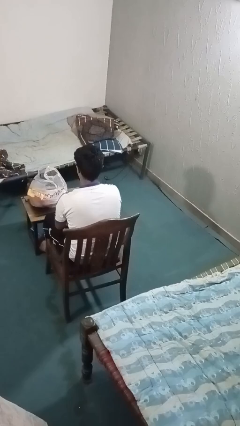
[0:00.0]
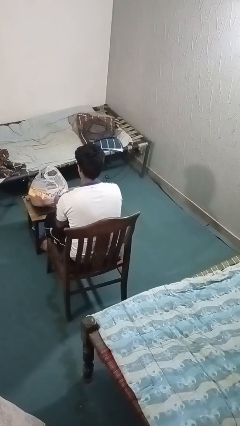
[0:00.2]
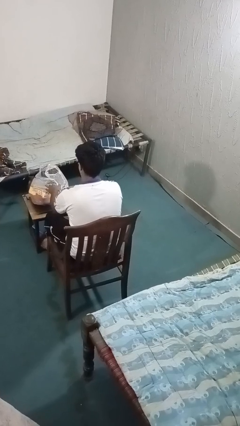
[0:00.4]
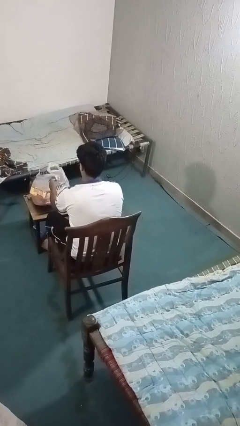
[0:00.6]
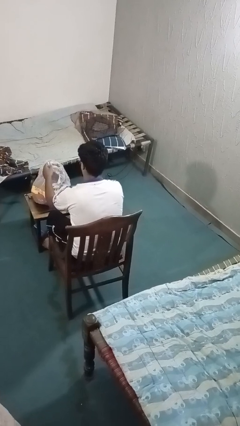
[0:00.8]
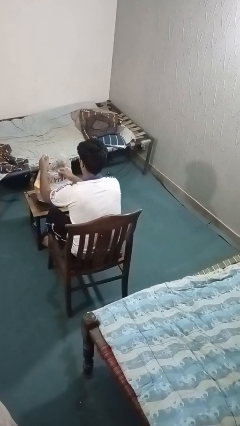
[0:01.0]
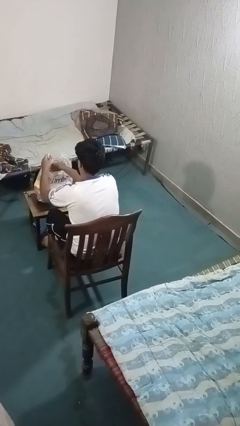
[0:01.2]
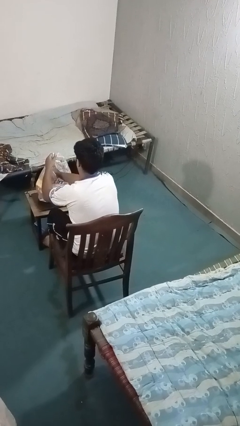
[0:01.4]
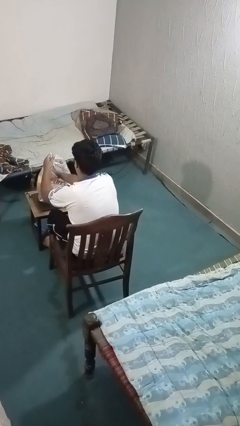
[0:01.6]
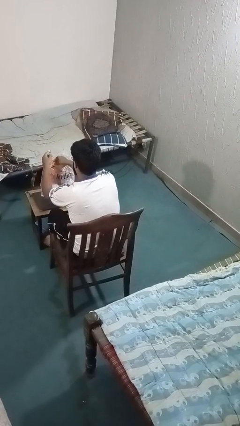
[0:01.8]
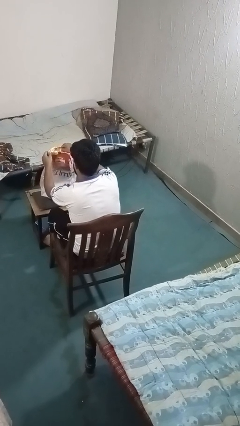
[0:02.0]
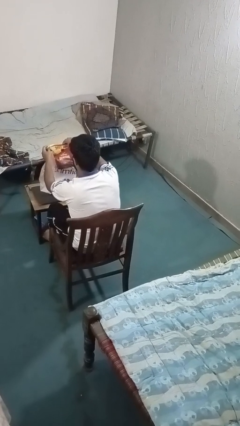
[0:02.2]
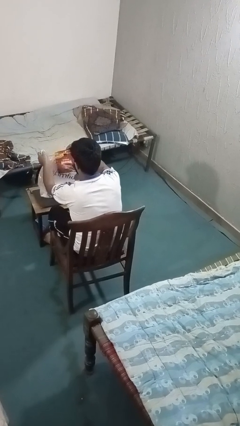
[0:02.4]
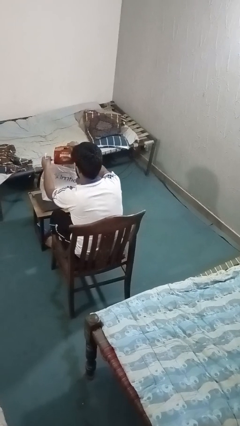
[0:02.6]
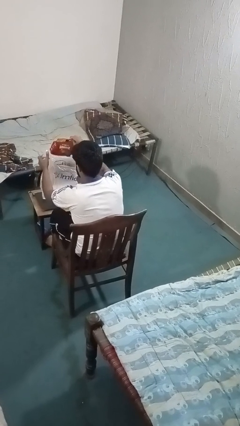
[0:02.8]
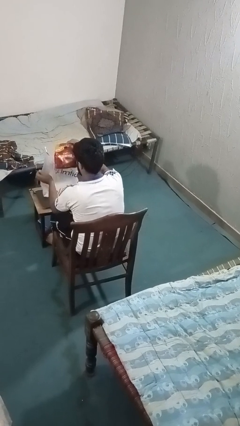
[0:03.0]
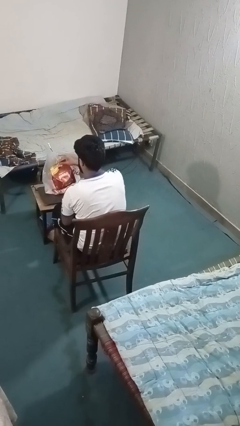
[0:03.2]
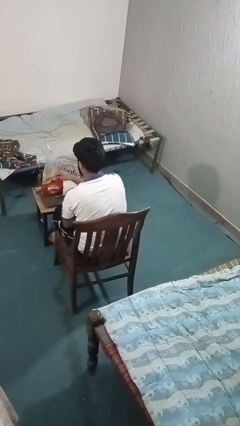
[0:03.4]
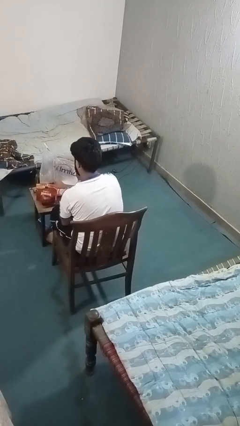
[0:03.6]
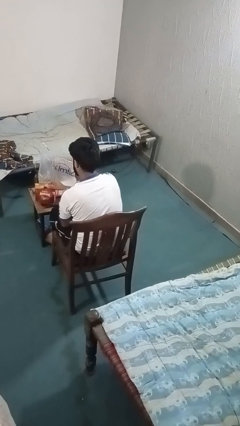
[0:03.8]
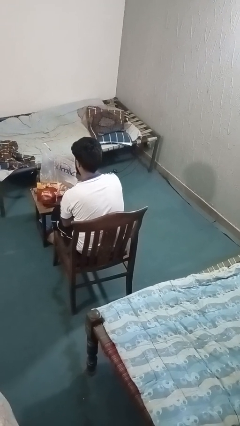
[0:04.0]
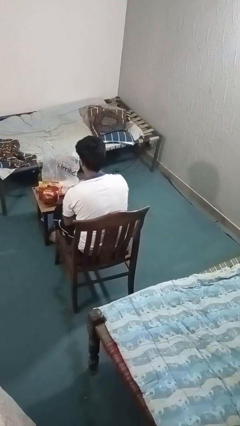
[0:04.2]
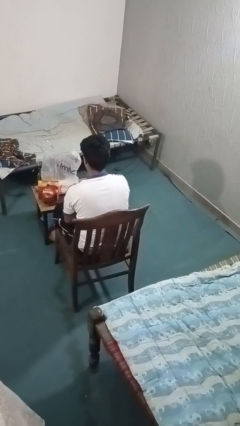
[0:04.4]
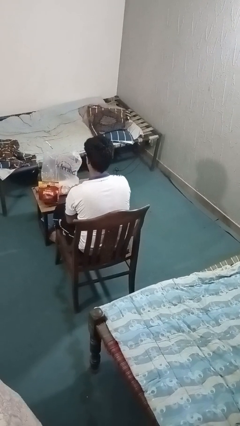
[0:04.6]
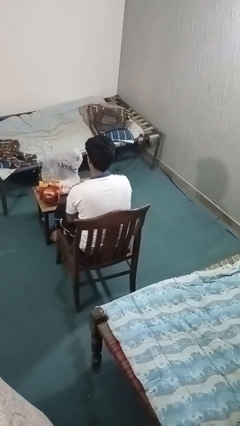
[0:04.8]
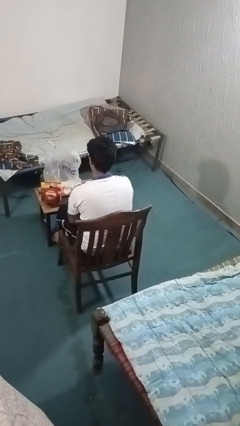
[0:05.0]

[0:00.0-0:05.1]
person takes object from bag

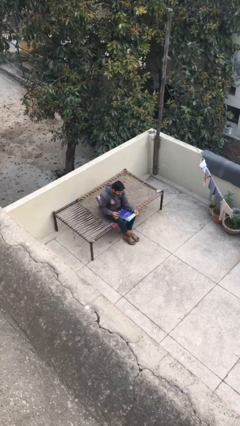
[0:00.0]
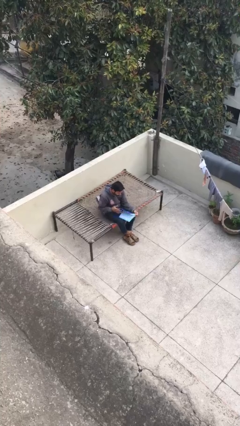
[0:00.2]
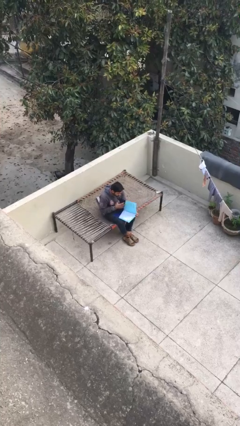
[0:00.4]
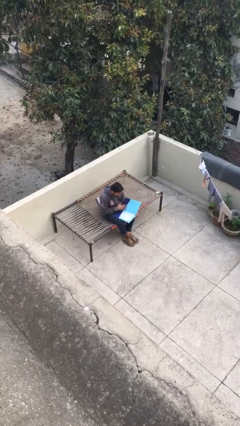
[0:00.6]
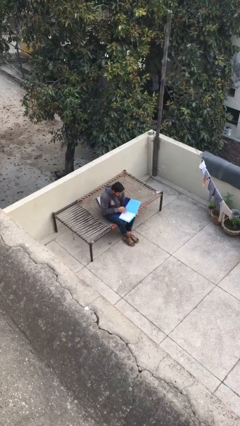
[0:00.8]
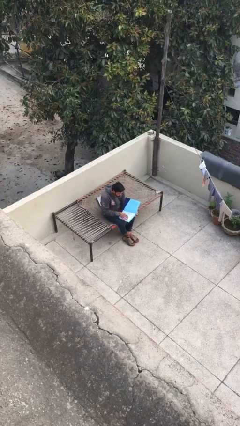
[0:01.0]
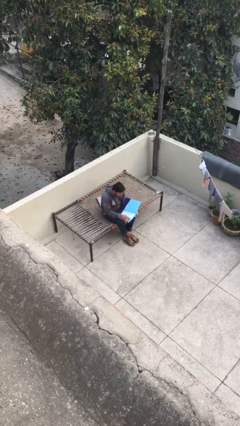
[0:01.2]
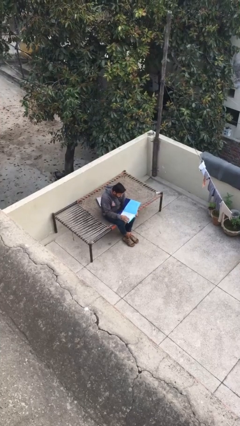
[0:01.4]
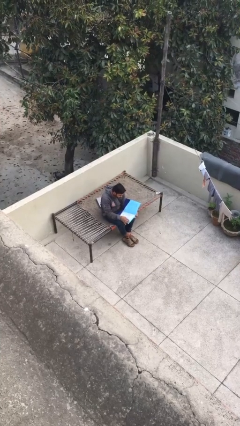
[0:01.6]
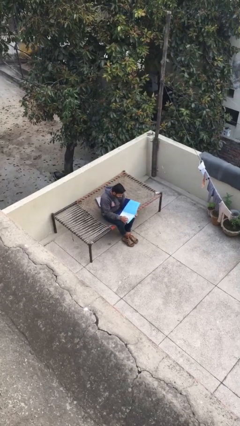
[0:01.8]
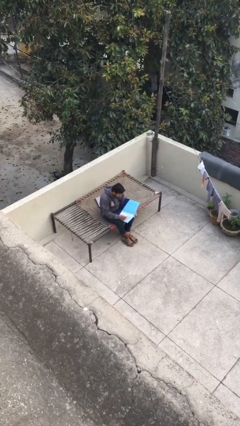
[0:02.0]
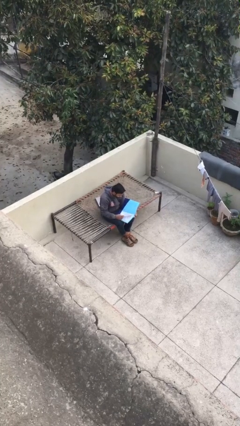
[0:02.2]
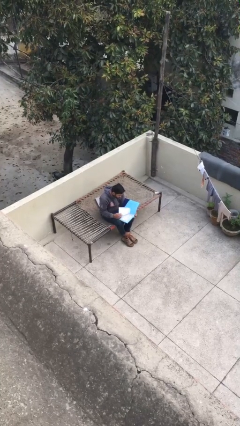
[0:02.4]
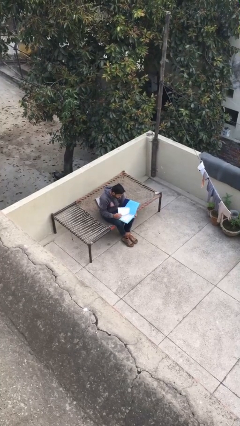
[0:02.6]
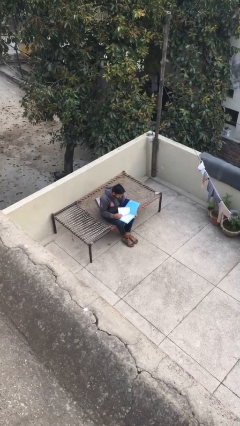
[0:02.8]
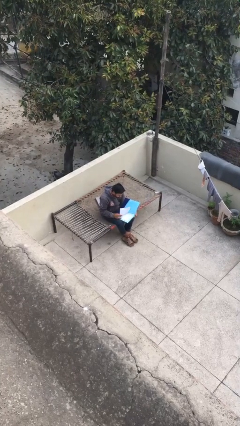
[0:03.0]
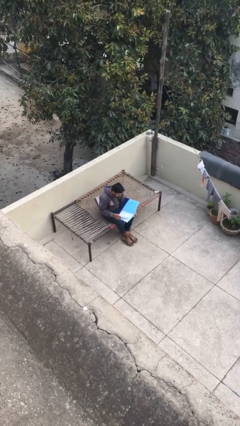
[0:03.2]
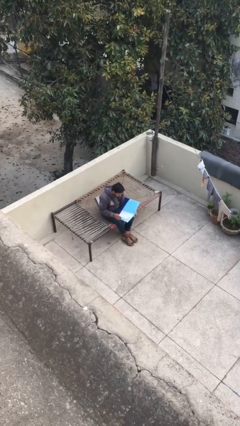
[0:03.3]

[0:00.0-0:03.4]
person reads document

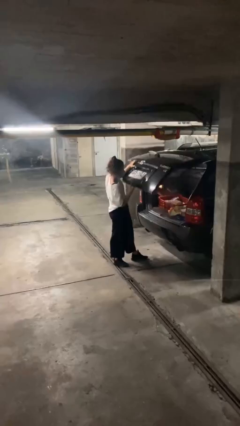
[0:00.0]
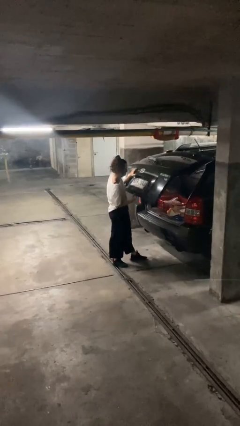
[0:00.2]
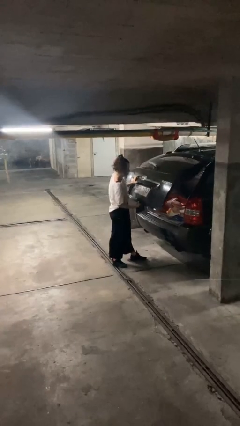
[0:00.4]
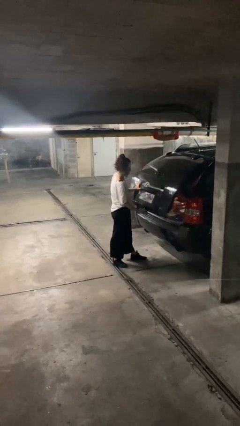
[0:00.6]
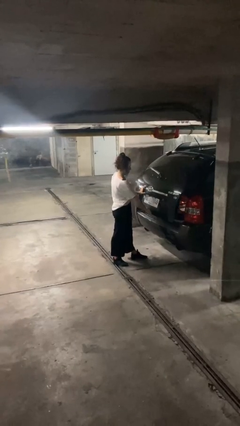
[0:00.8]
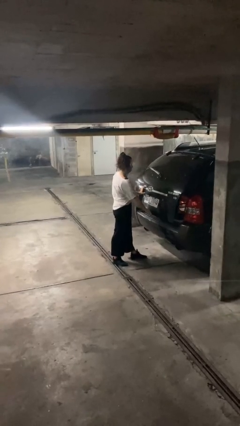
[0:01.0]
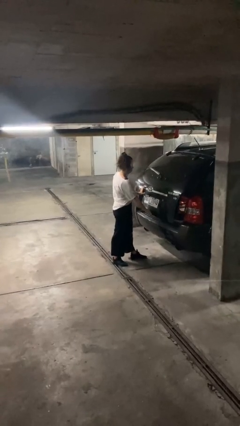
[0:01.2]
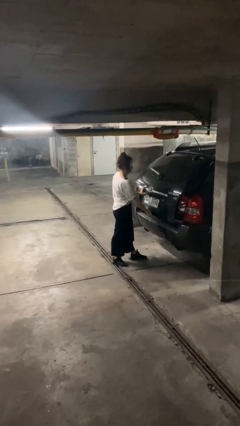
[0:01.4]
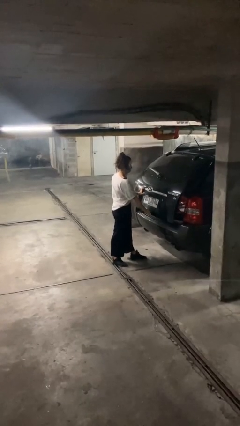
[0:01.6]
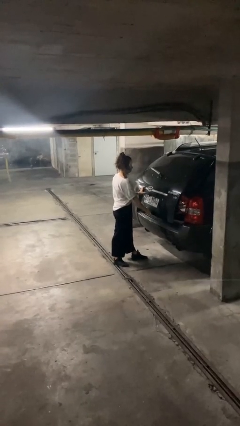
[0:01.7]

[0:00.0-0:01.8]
person closes car trunk

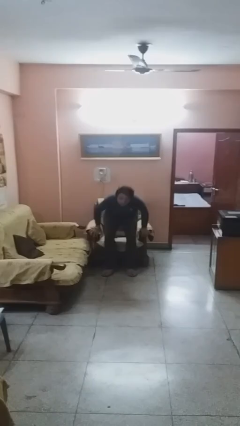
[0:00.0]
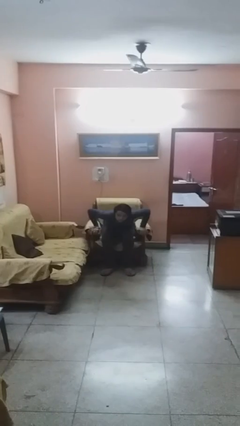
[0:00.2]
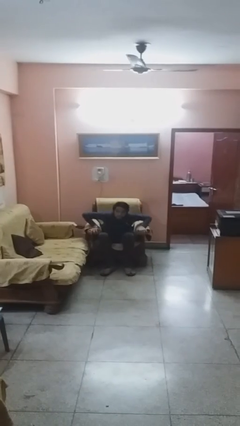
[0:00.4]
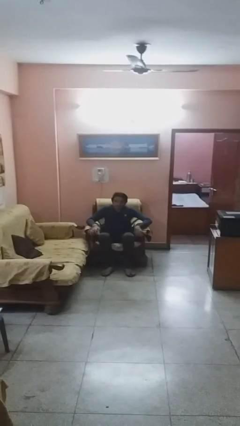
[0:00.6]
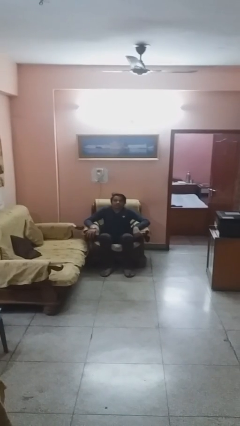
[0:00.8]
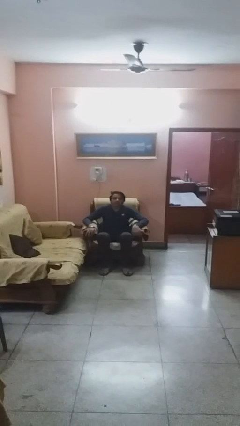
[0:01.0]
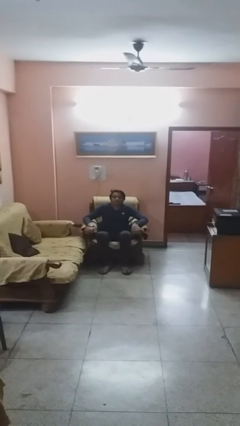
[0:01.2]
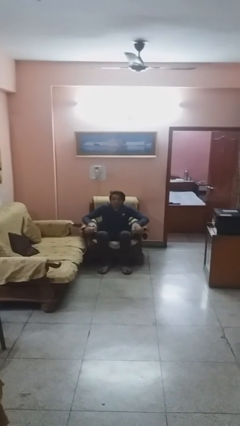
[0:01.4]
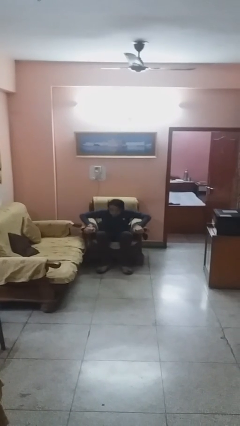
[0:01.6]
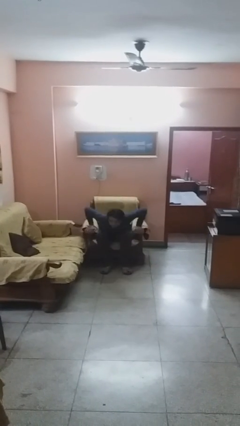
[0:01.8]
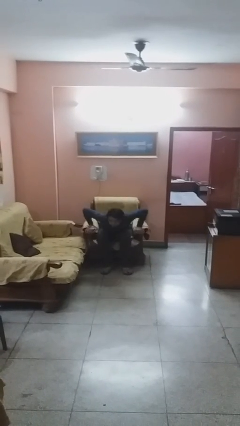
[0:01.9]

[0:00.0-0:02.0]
person sits down

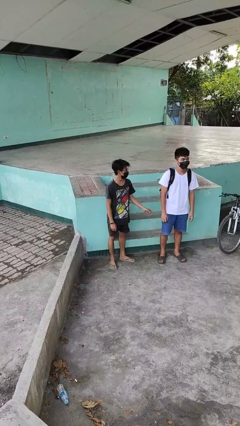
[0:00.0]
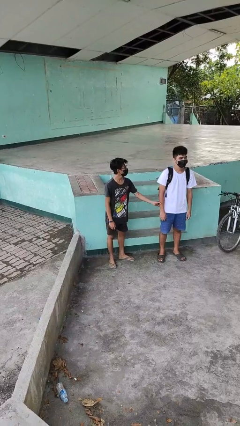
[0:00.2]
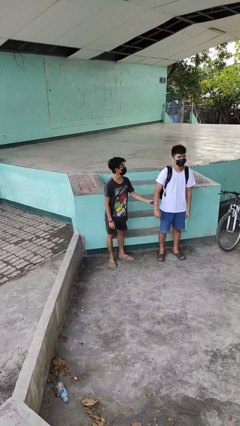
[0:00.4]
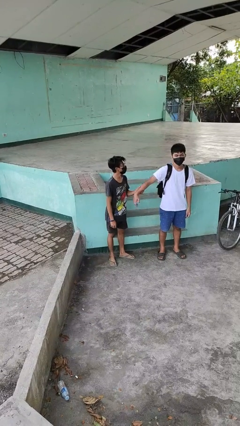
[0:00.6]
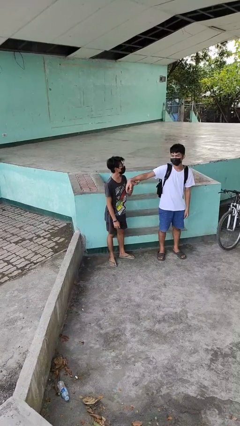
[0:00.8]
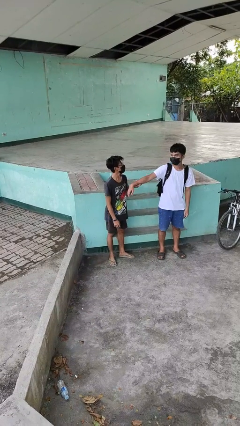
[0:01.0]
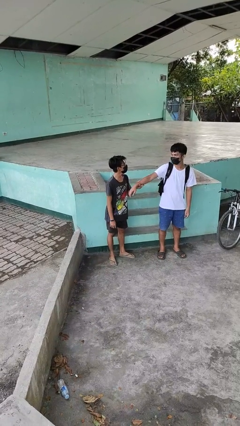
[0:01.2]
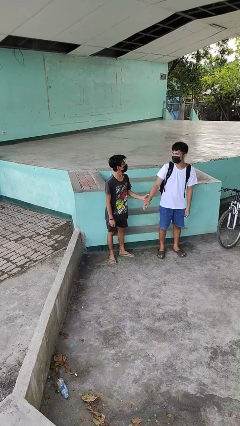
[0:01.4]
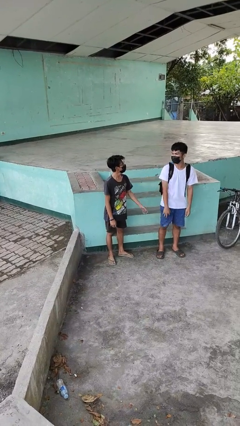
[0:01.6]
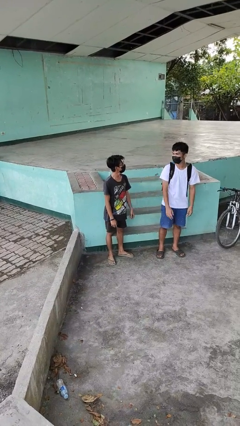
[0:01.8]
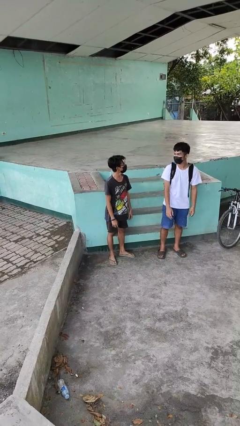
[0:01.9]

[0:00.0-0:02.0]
person grabs person by forearm

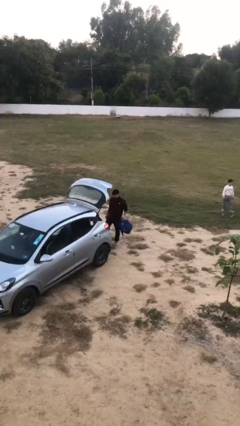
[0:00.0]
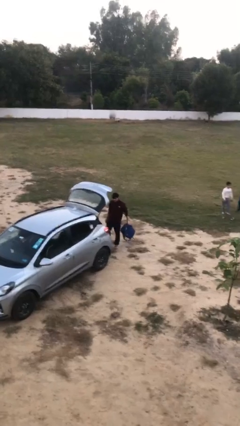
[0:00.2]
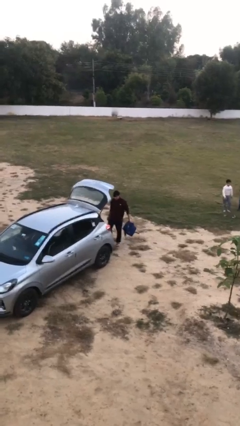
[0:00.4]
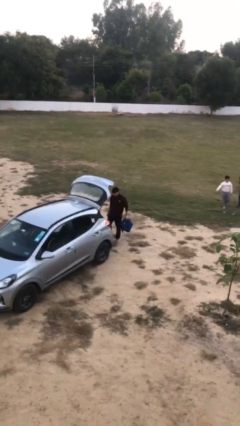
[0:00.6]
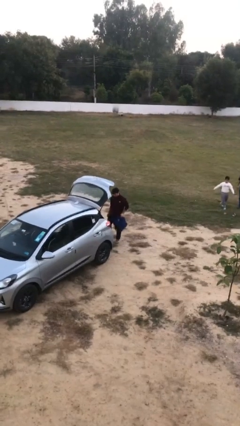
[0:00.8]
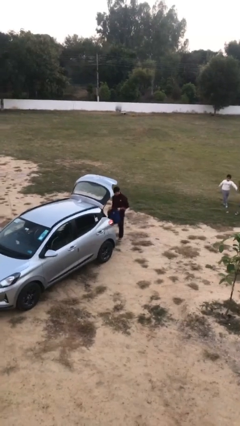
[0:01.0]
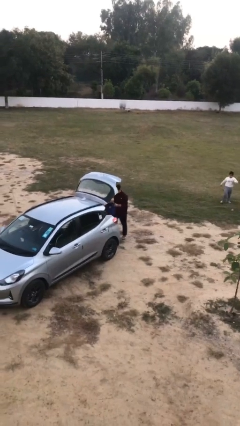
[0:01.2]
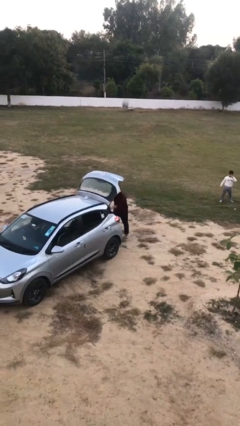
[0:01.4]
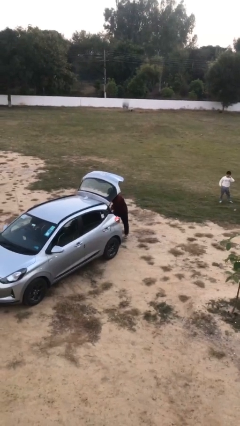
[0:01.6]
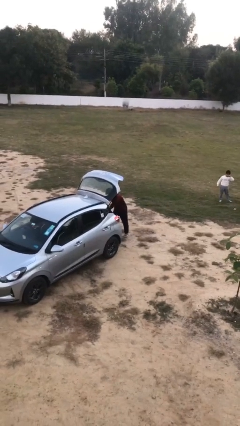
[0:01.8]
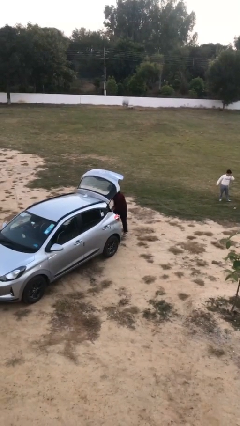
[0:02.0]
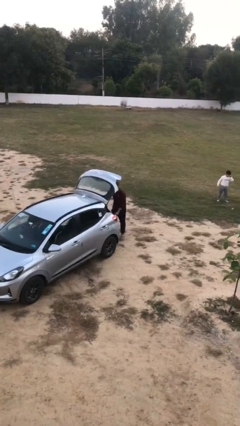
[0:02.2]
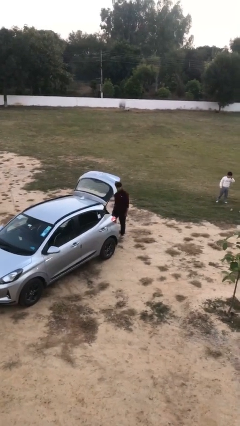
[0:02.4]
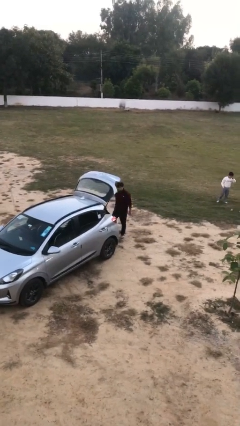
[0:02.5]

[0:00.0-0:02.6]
person loads car

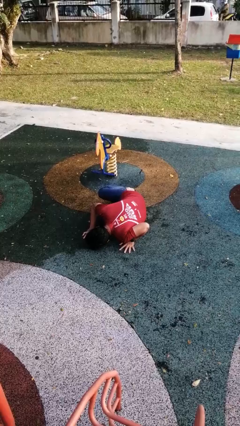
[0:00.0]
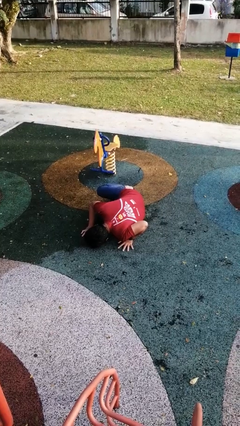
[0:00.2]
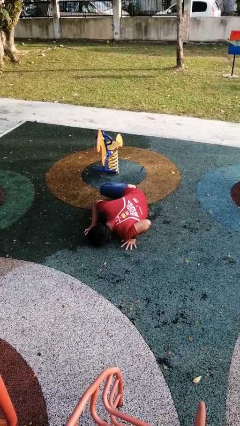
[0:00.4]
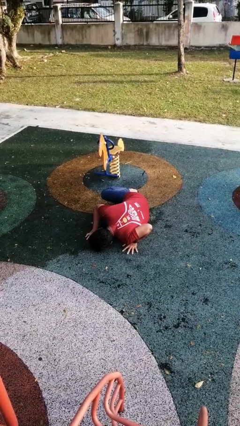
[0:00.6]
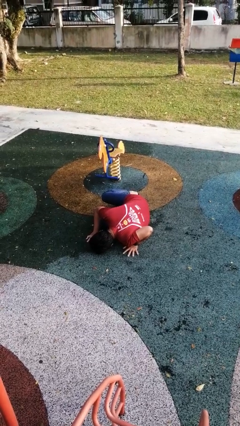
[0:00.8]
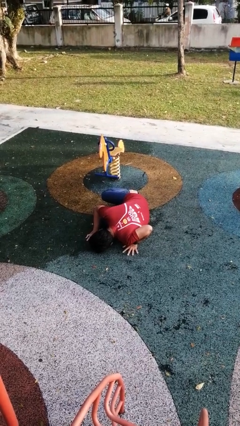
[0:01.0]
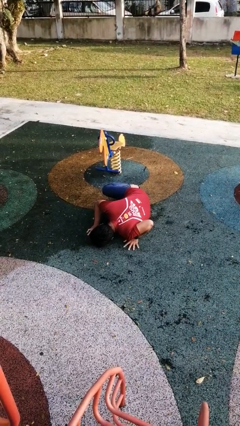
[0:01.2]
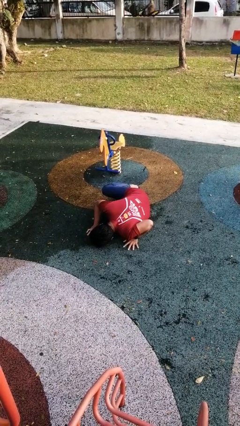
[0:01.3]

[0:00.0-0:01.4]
person lies down on floor
